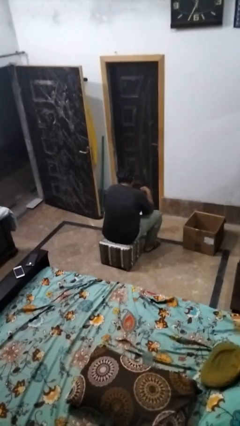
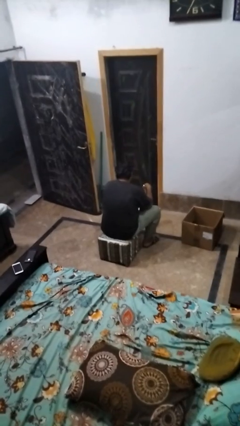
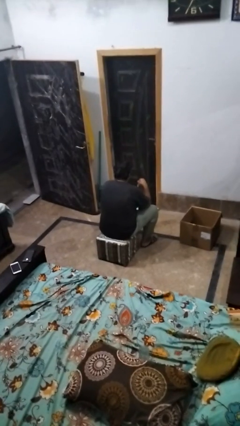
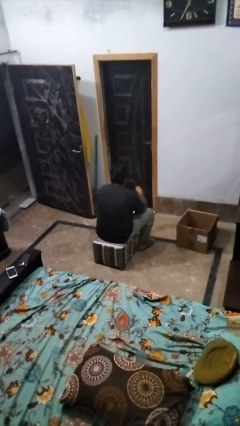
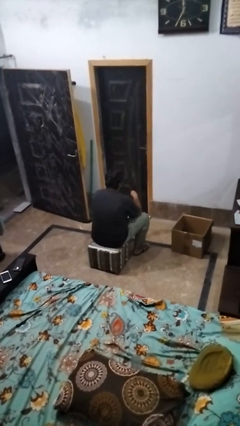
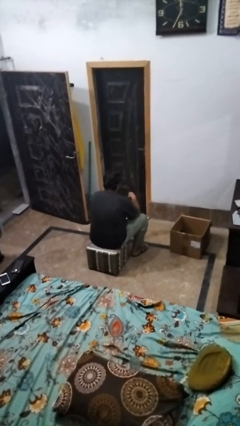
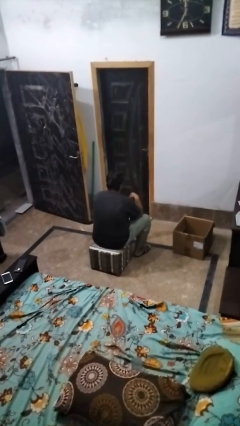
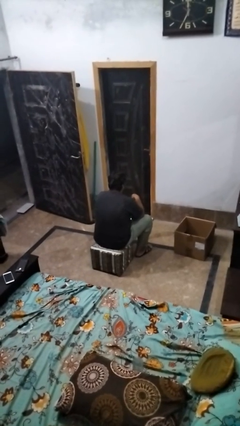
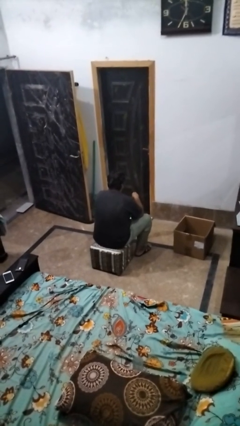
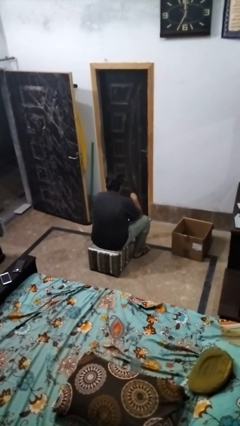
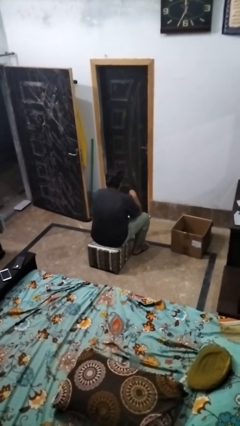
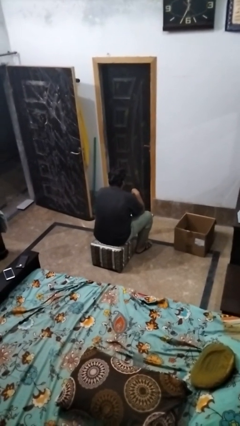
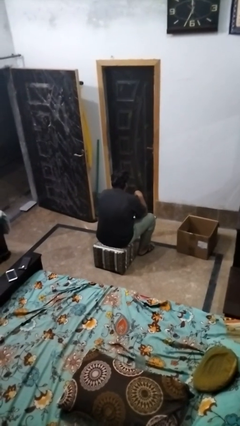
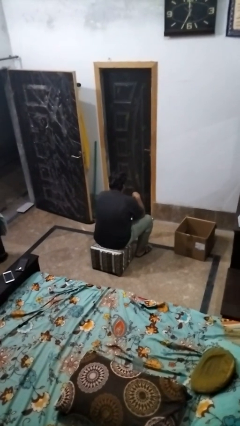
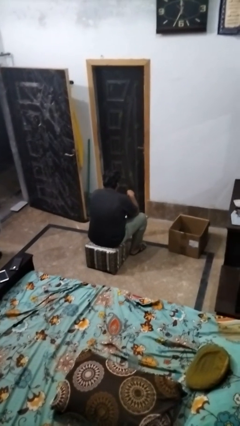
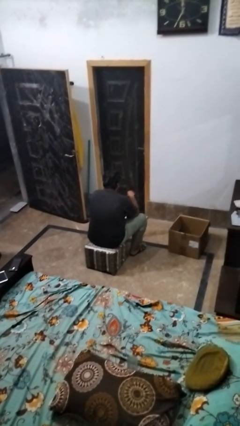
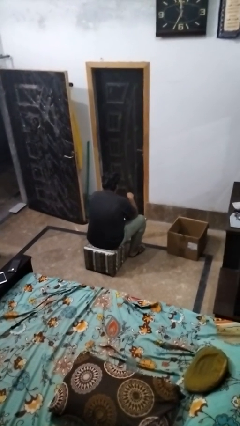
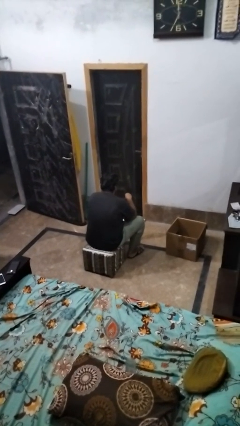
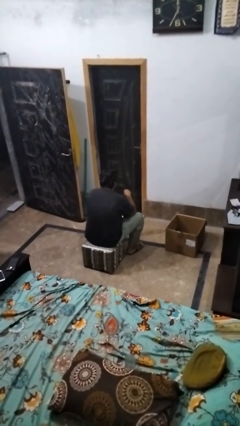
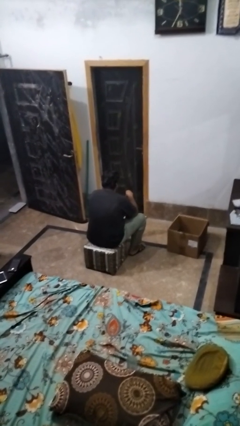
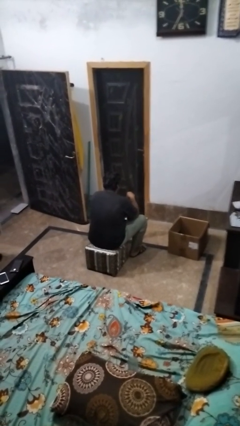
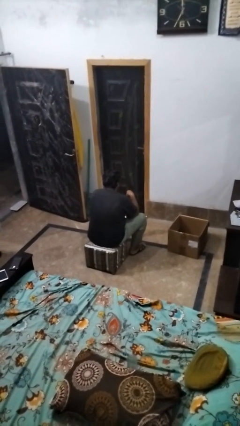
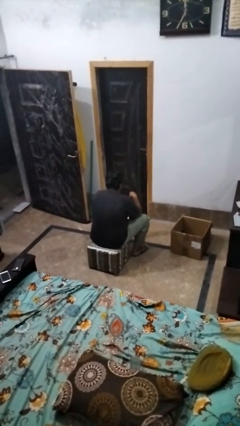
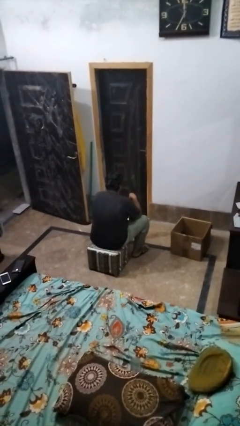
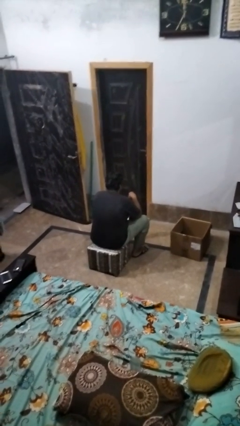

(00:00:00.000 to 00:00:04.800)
person stirs mug

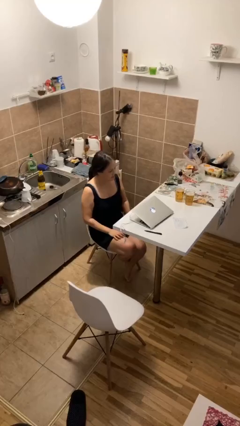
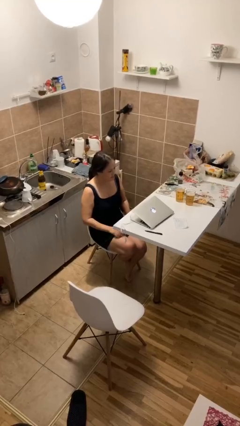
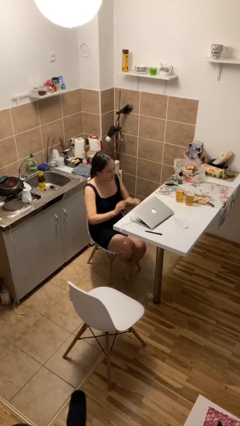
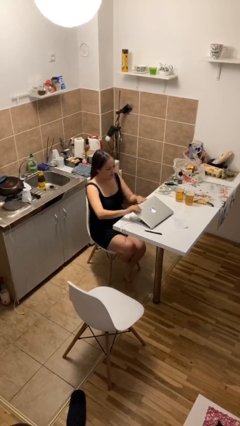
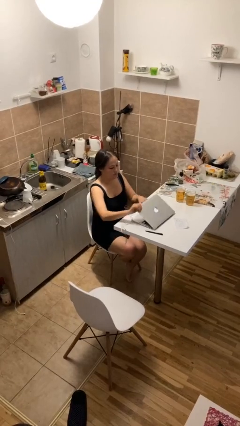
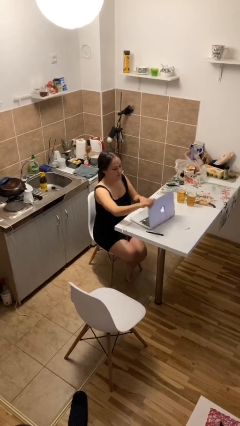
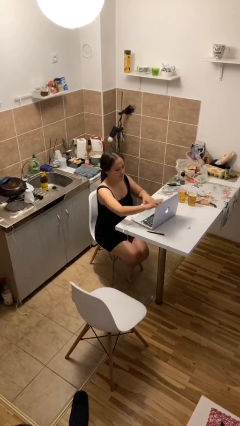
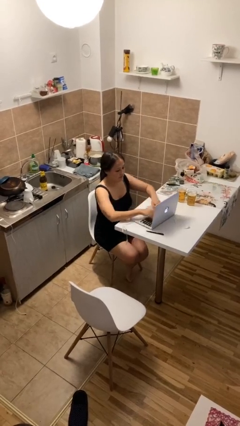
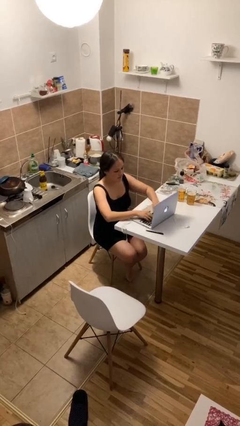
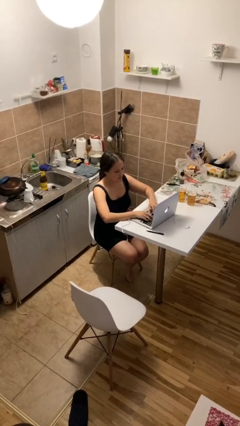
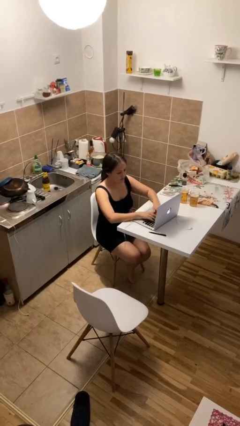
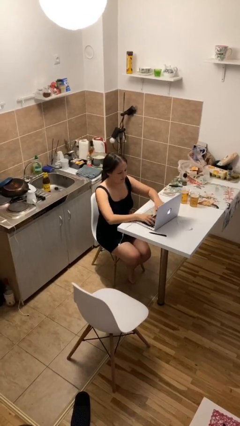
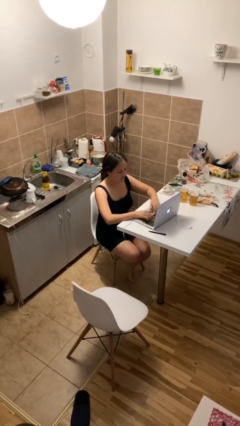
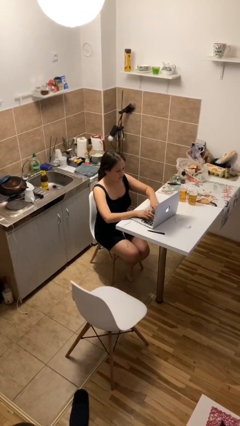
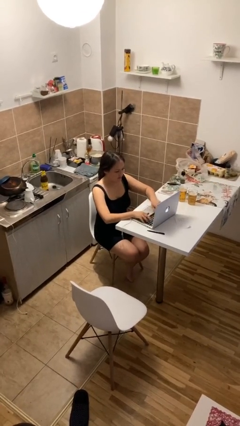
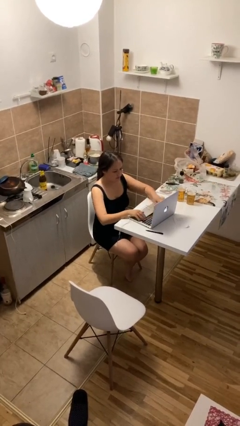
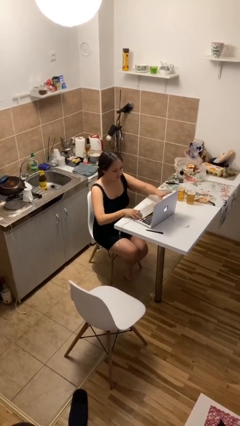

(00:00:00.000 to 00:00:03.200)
person interacts with laptop

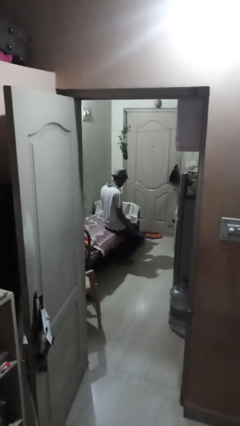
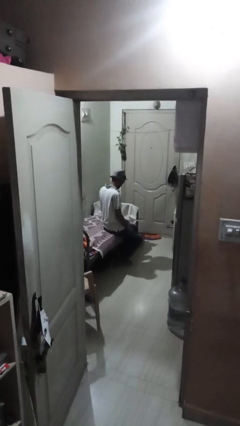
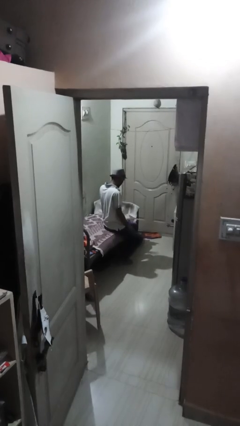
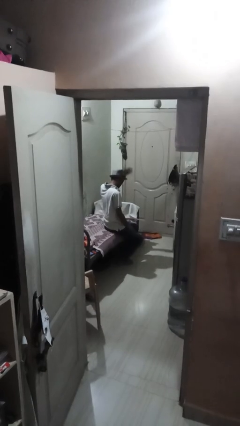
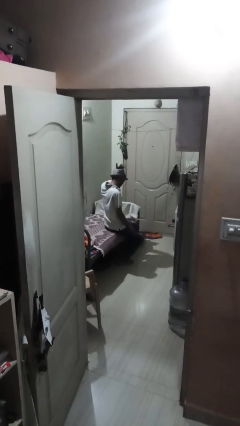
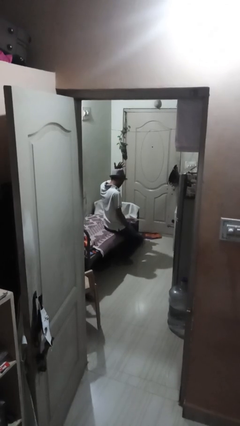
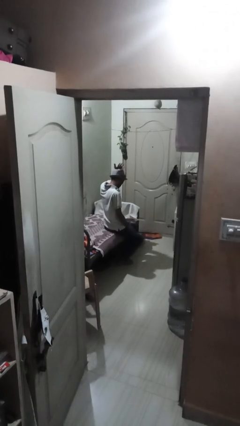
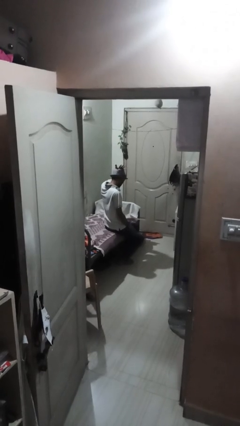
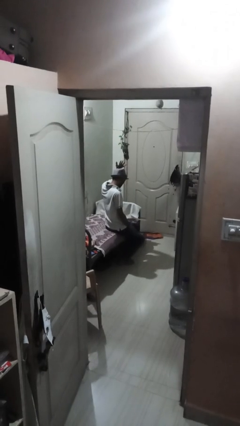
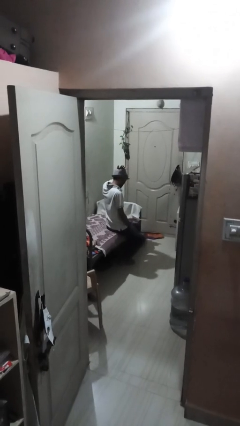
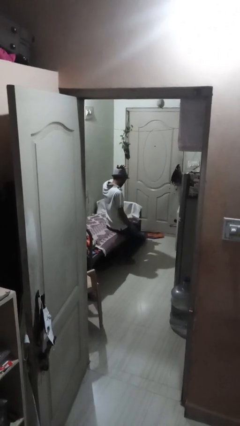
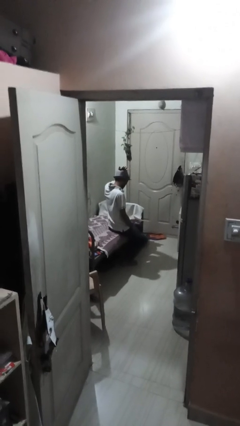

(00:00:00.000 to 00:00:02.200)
person pats head

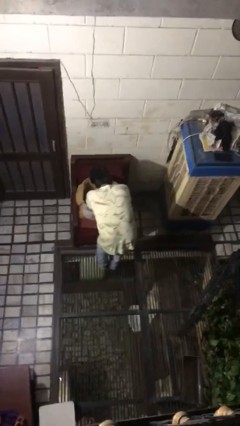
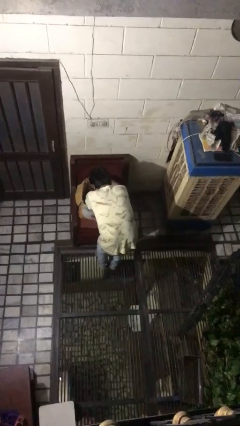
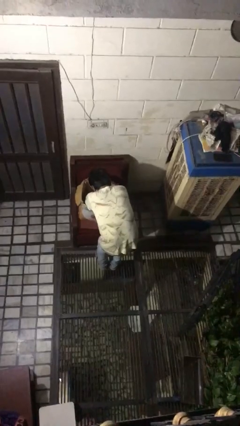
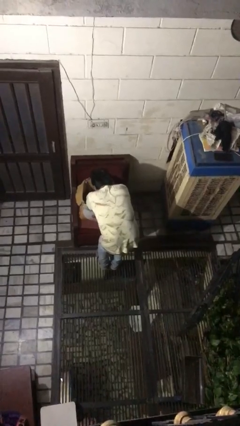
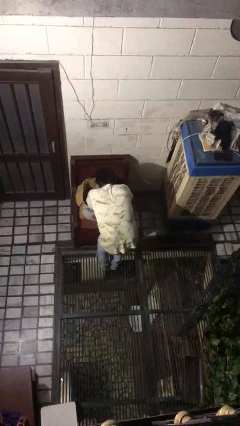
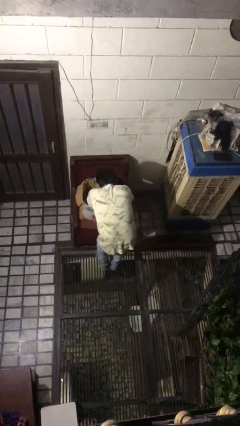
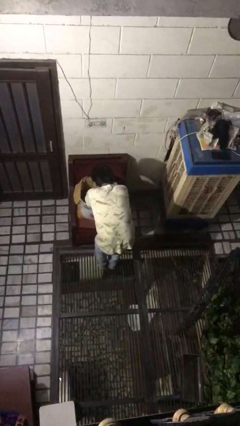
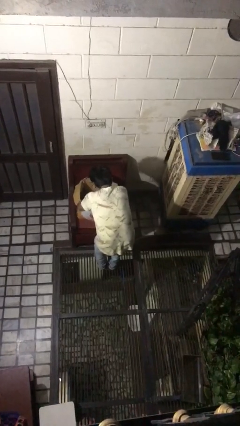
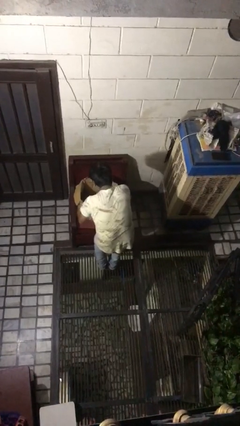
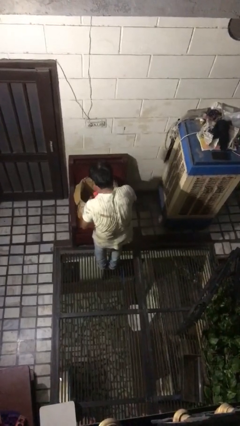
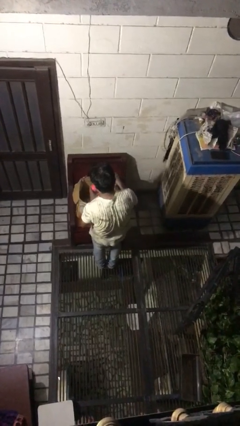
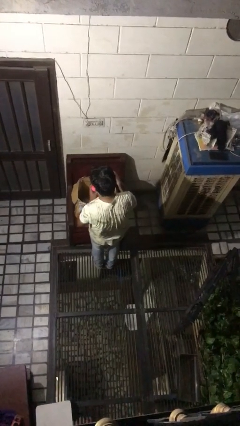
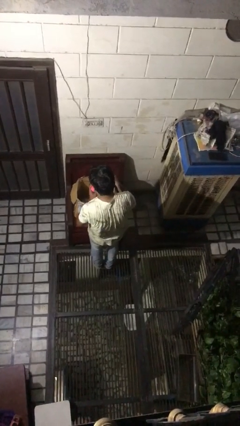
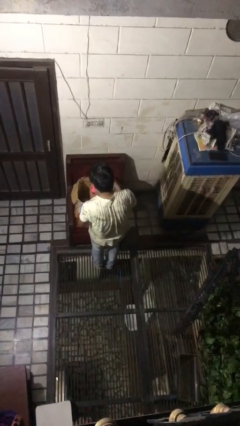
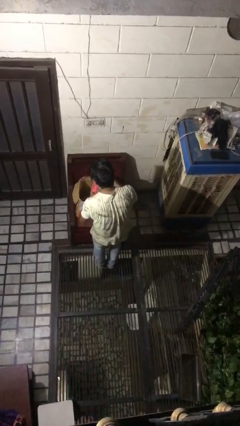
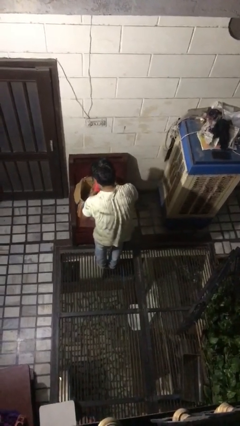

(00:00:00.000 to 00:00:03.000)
person searches in box

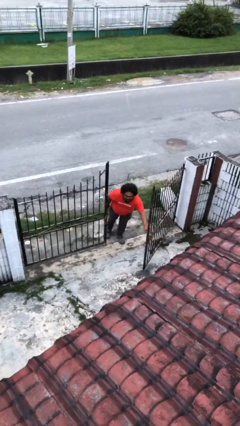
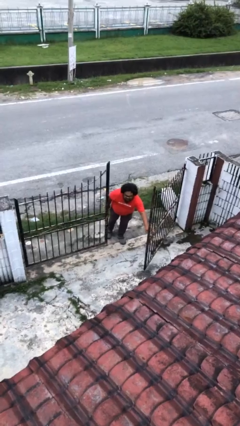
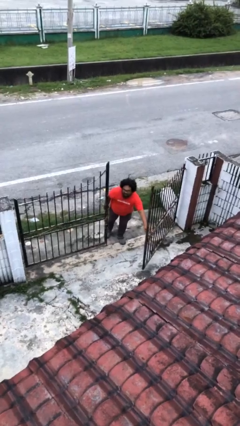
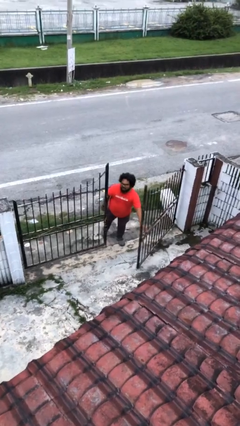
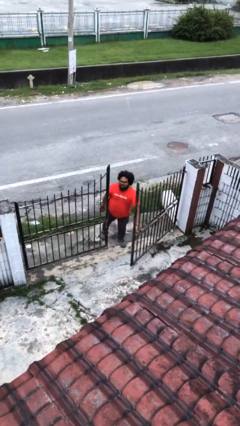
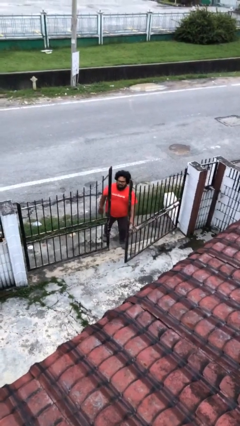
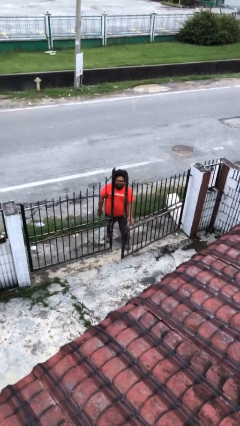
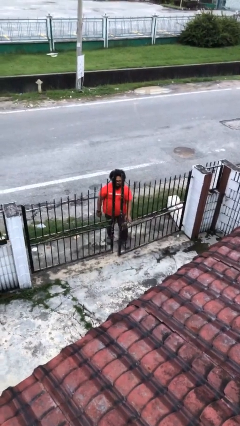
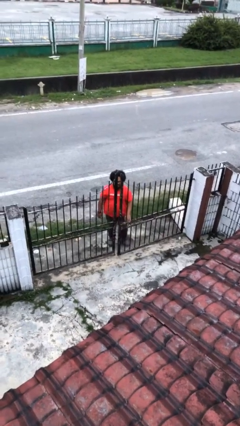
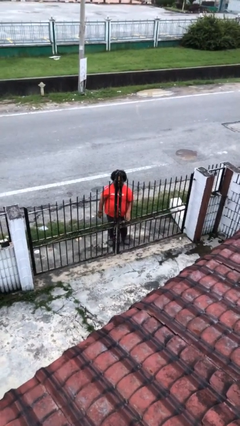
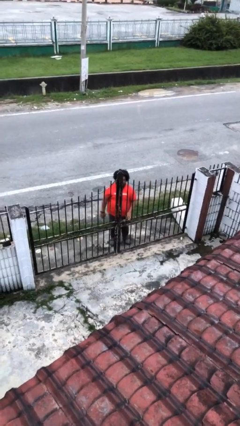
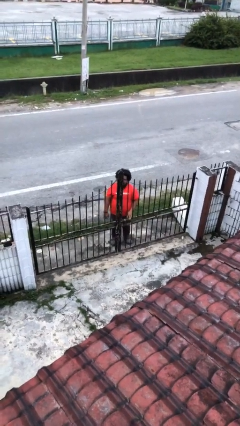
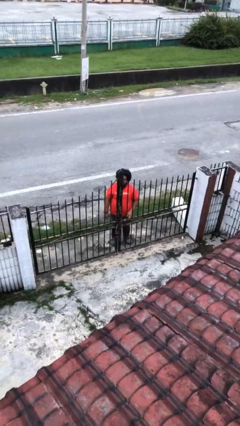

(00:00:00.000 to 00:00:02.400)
person closes facility door

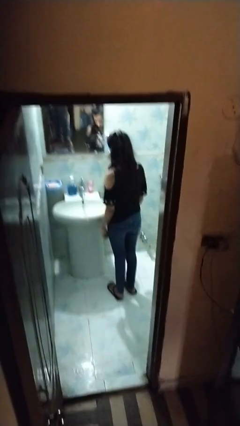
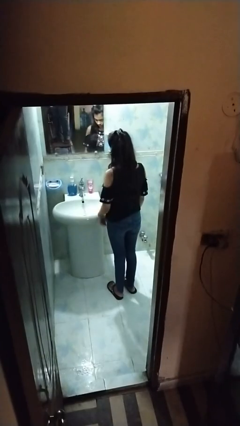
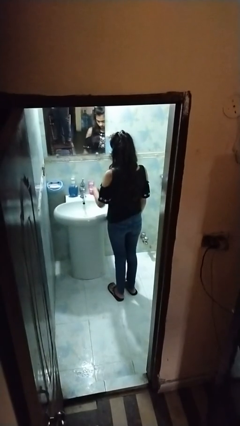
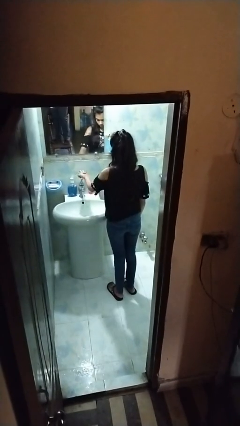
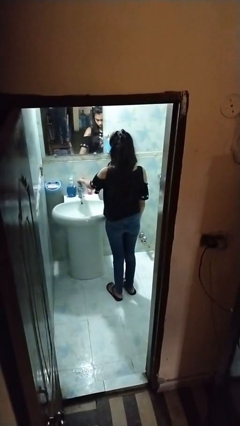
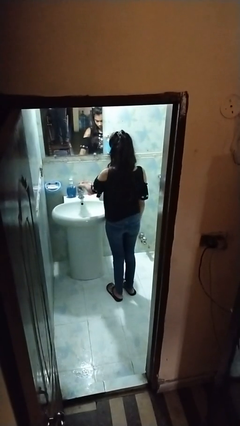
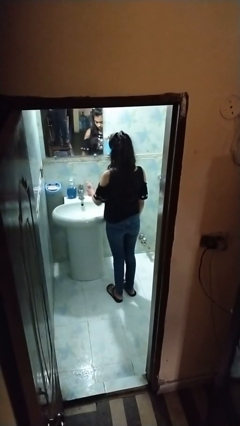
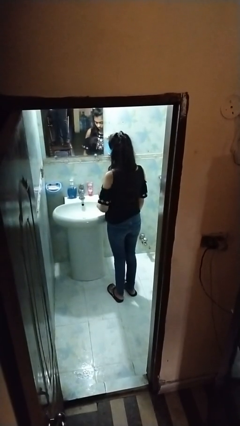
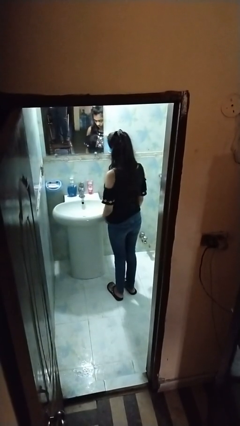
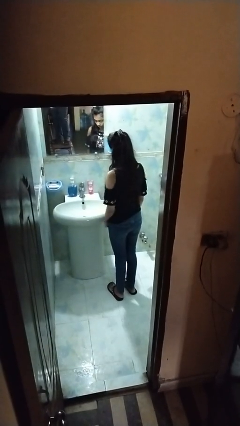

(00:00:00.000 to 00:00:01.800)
person turns off faucet
